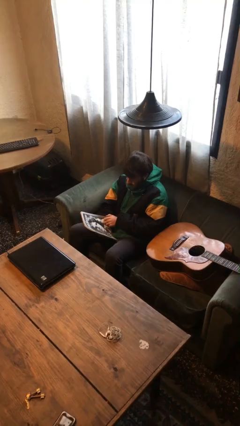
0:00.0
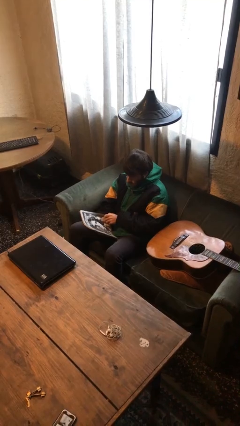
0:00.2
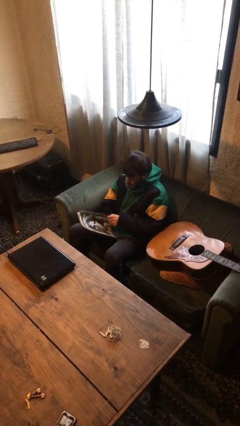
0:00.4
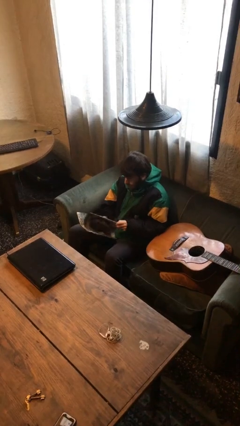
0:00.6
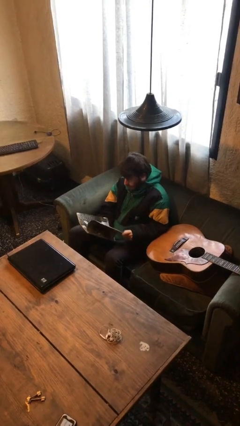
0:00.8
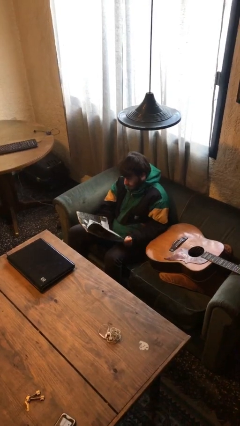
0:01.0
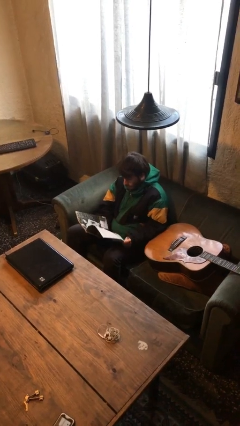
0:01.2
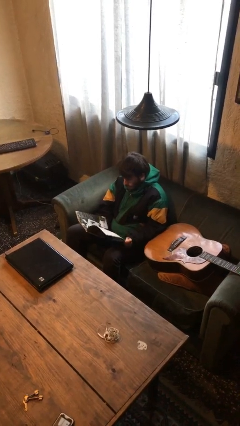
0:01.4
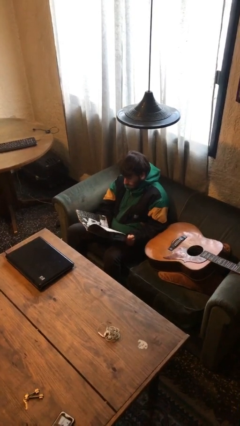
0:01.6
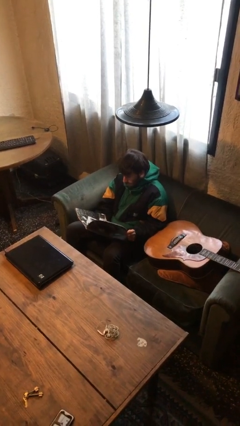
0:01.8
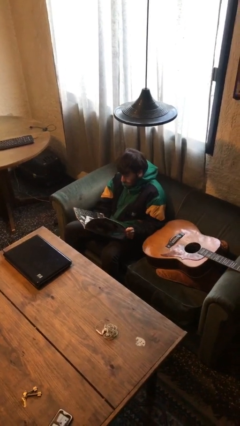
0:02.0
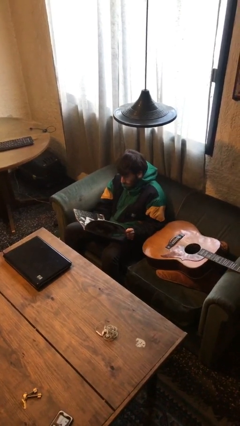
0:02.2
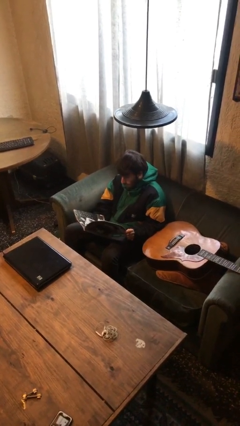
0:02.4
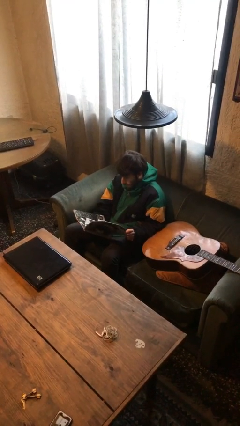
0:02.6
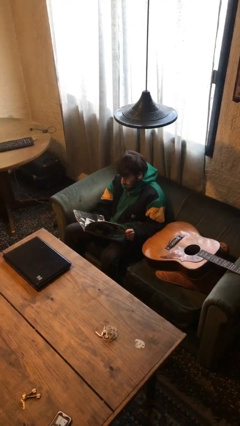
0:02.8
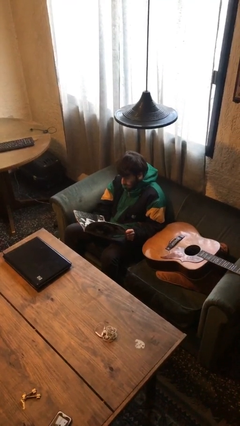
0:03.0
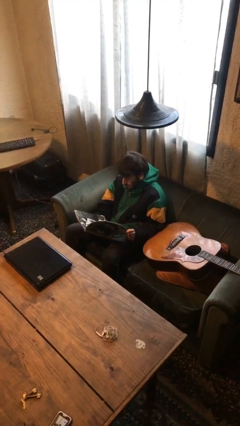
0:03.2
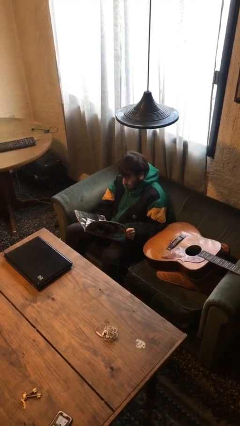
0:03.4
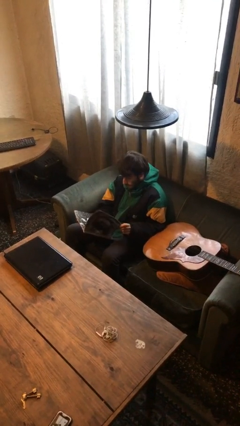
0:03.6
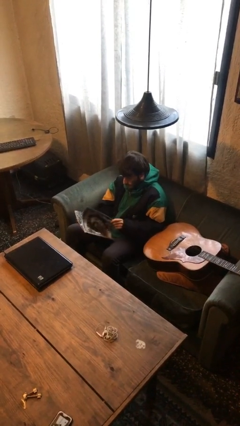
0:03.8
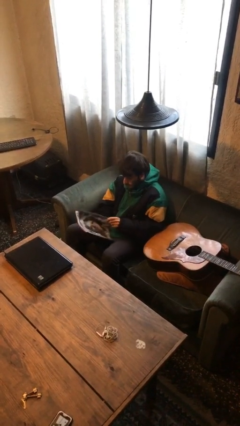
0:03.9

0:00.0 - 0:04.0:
person reads magazine

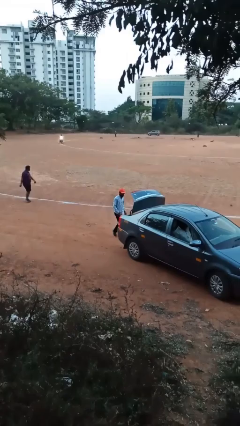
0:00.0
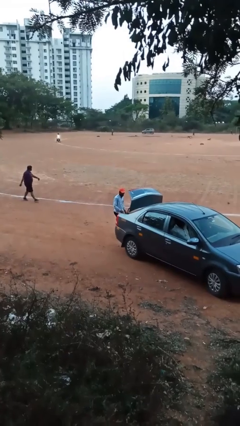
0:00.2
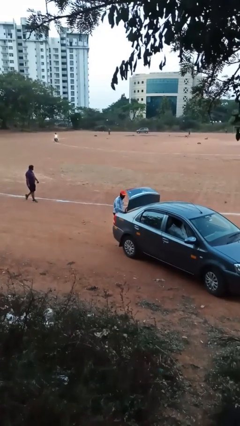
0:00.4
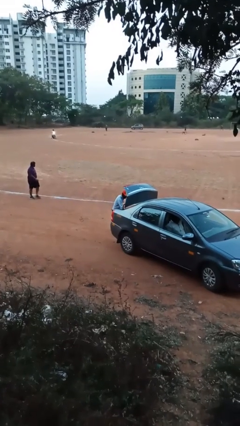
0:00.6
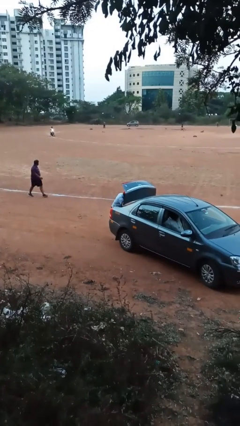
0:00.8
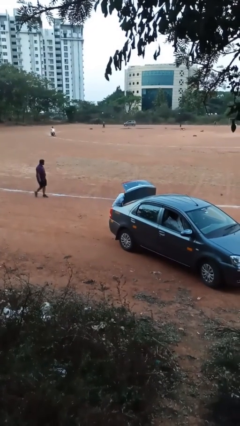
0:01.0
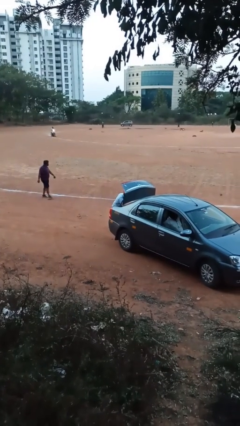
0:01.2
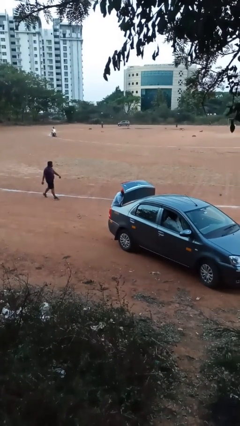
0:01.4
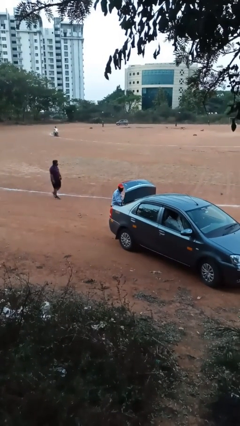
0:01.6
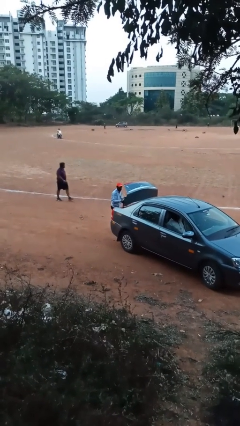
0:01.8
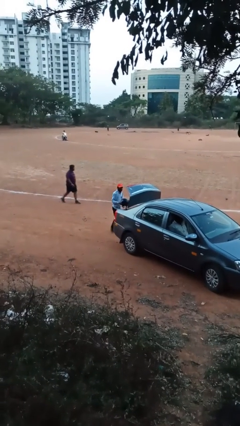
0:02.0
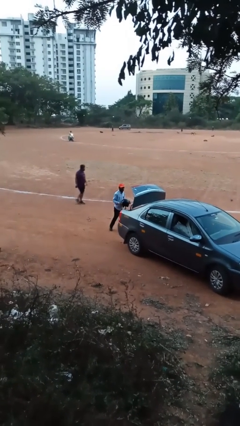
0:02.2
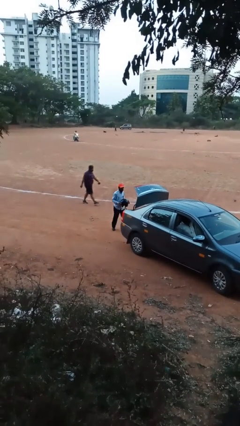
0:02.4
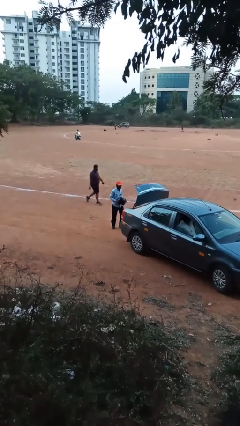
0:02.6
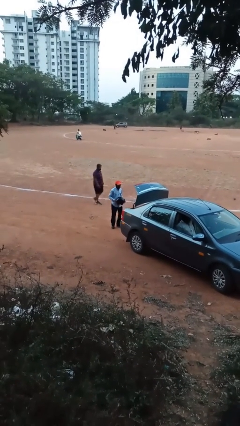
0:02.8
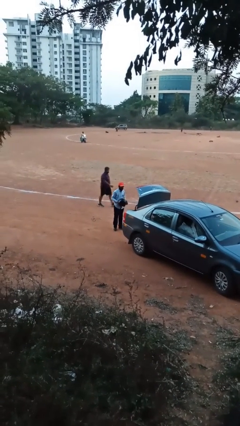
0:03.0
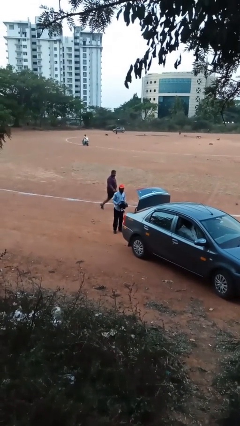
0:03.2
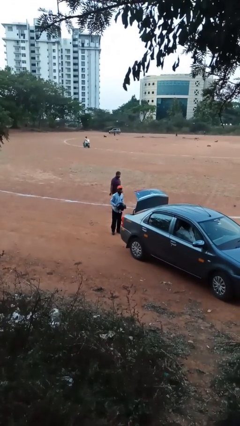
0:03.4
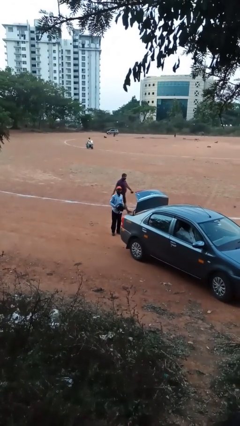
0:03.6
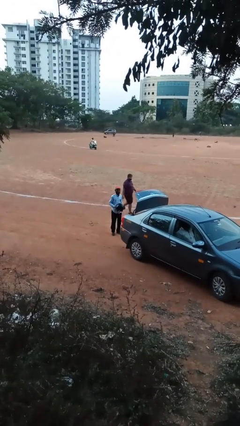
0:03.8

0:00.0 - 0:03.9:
person unloads car

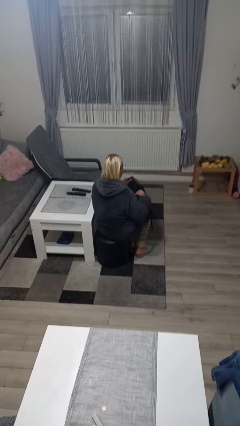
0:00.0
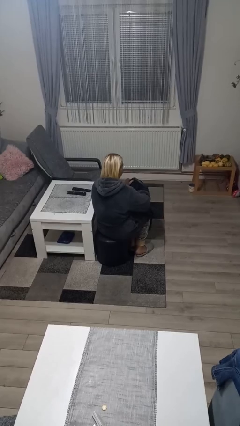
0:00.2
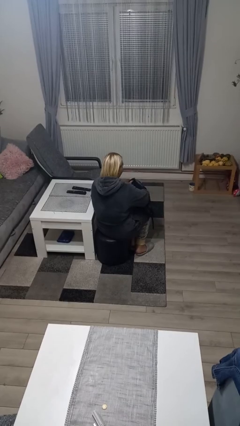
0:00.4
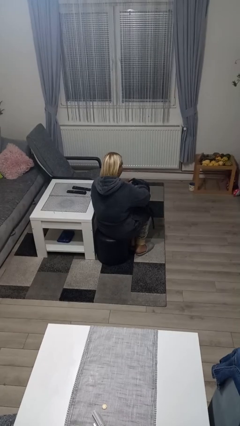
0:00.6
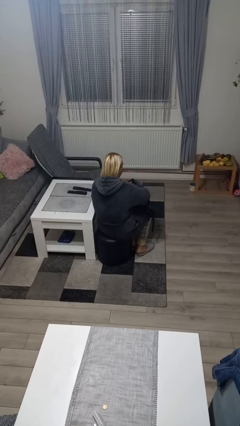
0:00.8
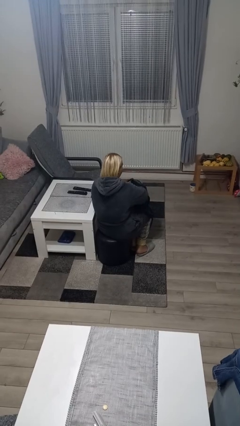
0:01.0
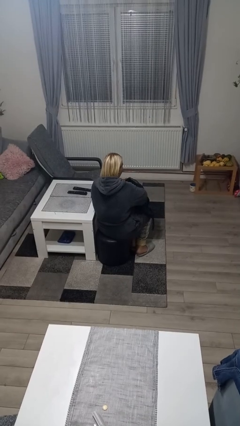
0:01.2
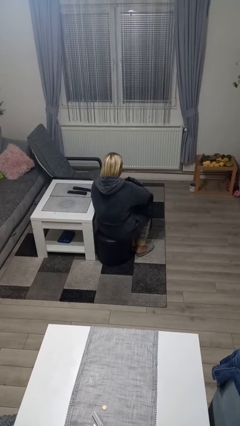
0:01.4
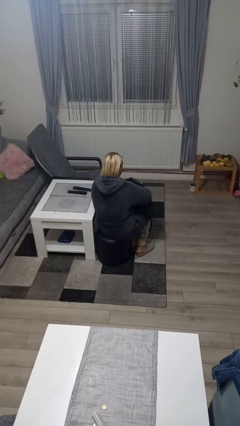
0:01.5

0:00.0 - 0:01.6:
person searches in bag

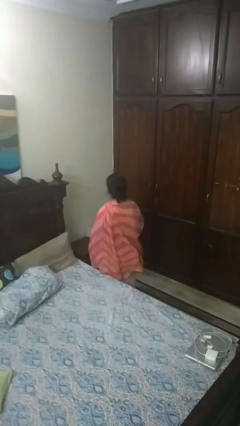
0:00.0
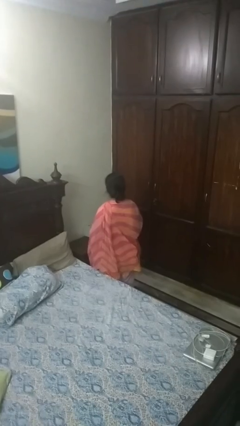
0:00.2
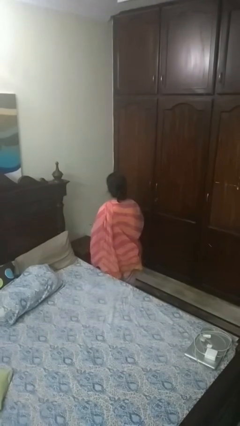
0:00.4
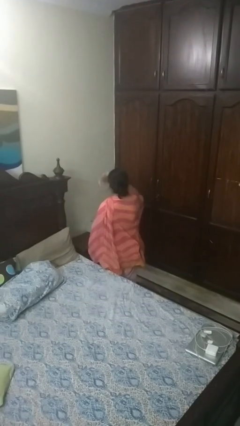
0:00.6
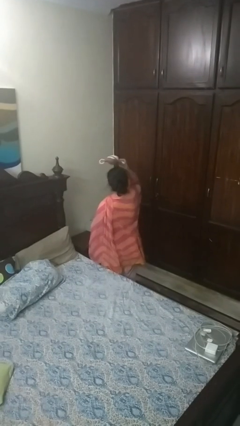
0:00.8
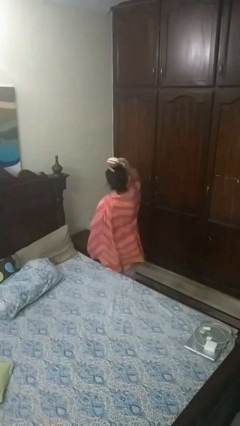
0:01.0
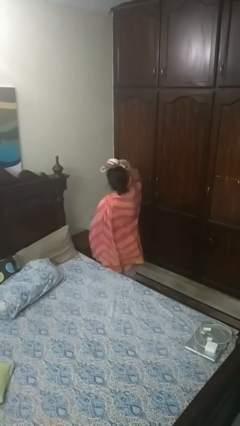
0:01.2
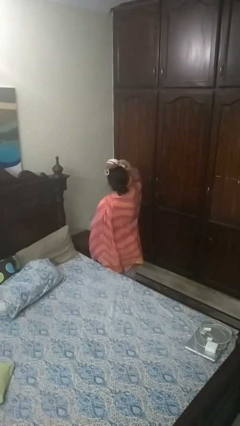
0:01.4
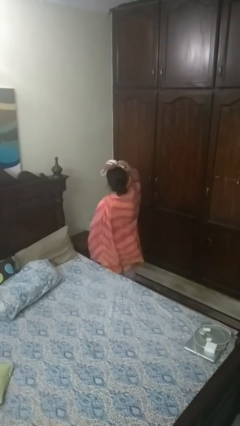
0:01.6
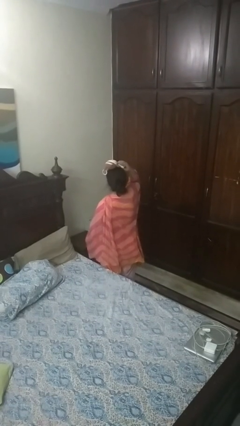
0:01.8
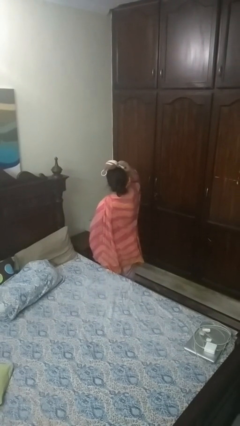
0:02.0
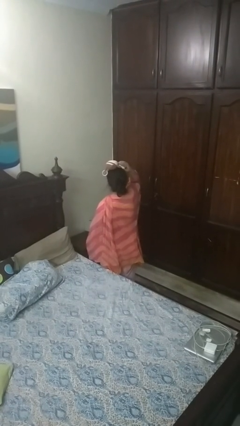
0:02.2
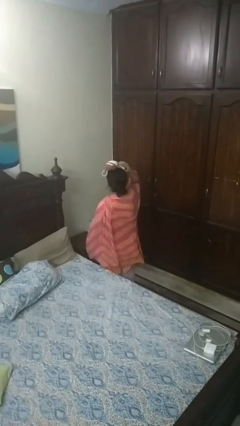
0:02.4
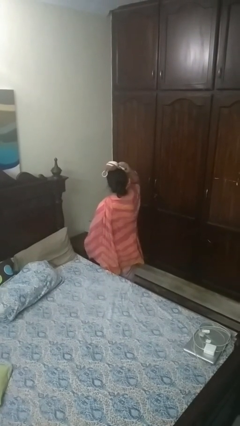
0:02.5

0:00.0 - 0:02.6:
person holds object above head

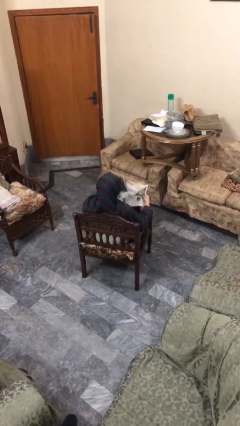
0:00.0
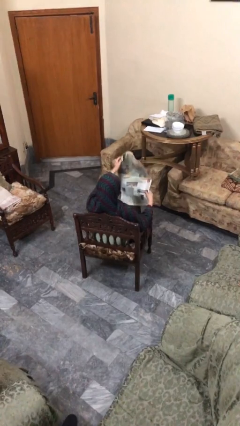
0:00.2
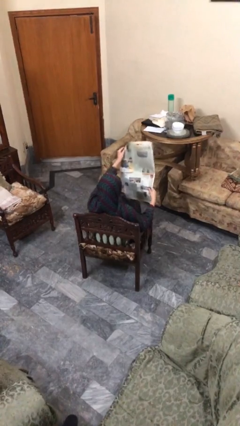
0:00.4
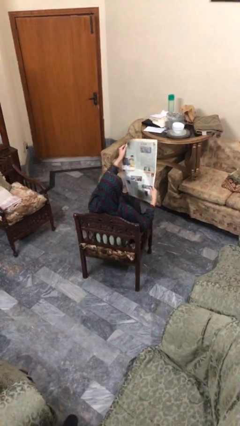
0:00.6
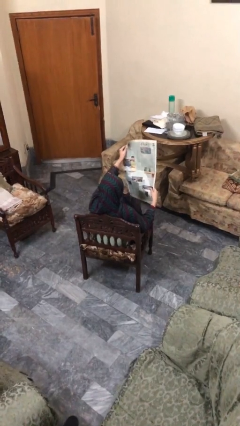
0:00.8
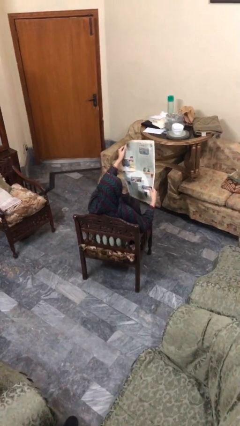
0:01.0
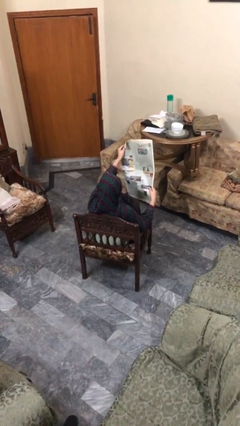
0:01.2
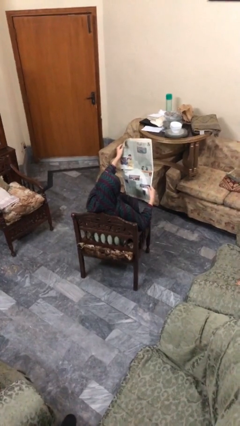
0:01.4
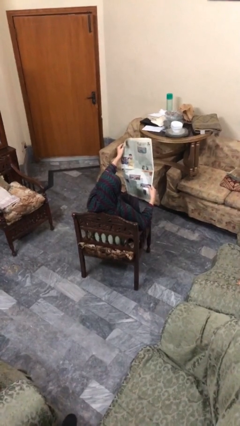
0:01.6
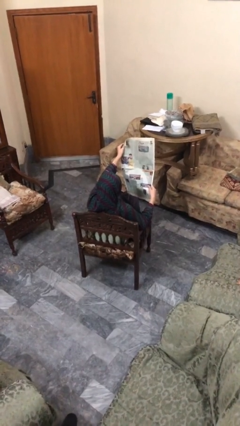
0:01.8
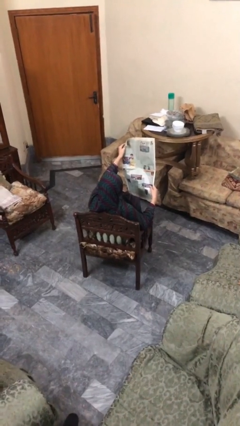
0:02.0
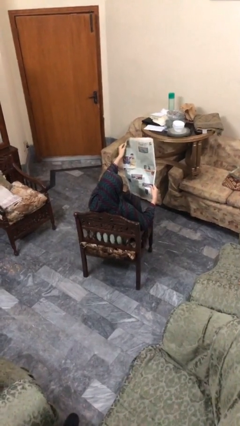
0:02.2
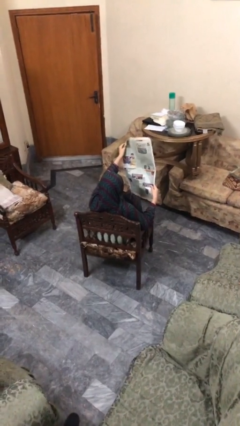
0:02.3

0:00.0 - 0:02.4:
person reads newspaper

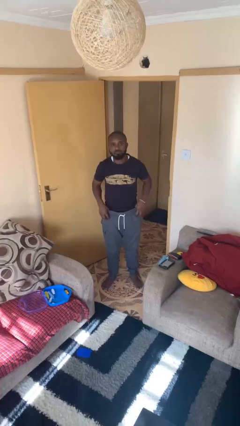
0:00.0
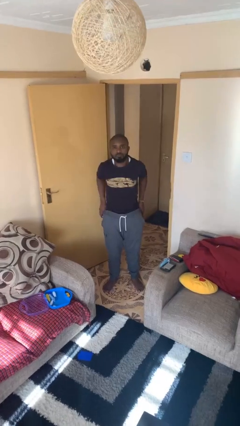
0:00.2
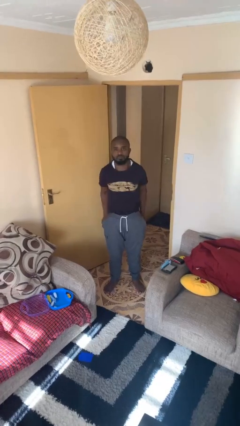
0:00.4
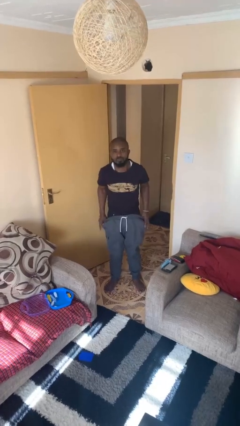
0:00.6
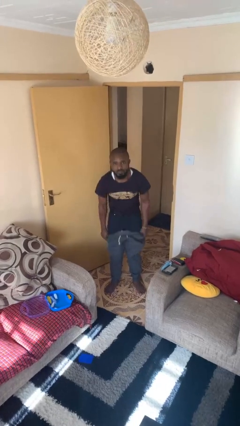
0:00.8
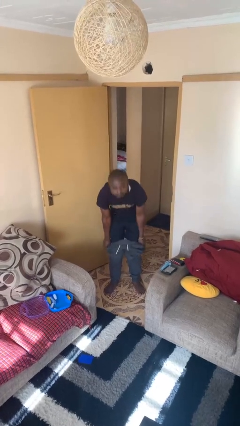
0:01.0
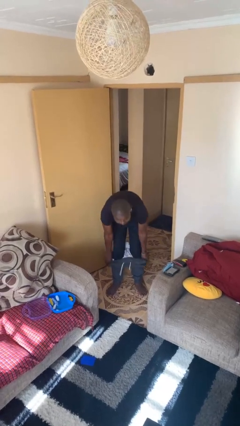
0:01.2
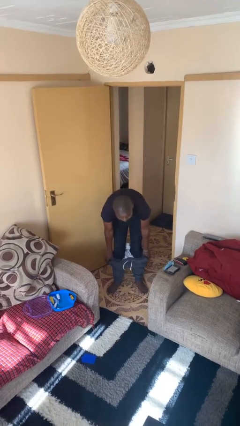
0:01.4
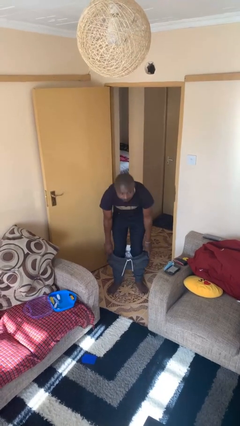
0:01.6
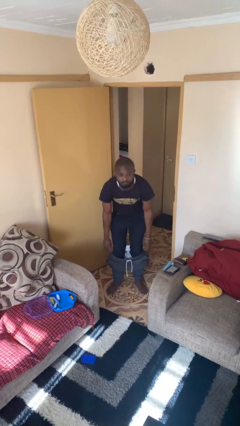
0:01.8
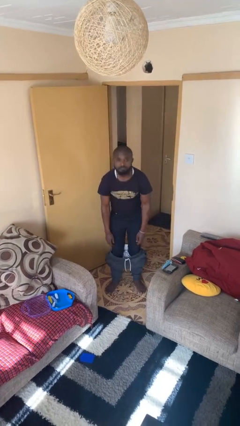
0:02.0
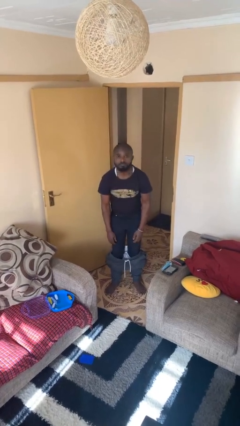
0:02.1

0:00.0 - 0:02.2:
person takes off pants

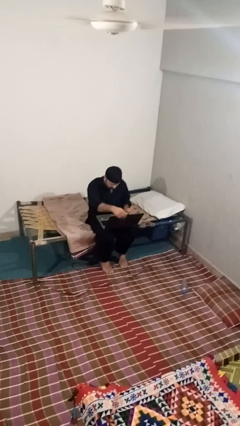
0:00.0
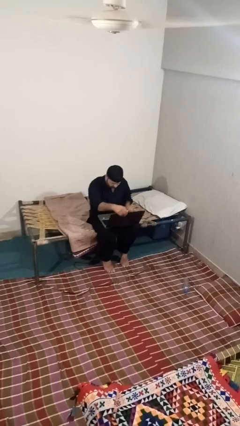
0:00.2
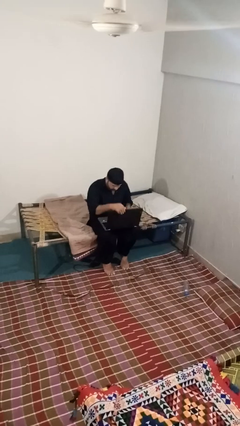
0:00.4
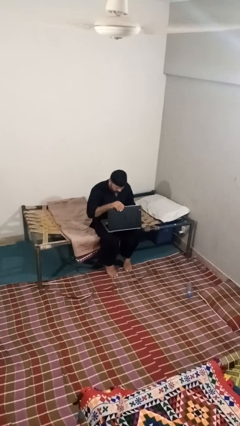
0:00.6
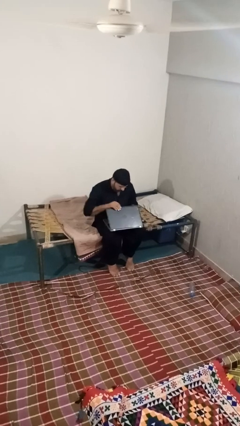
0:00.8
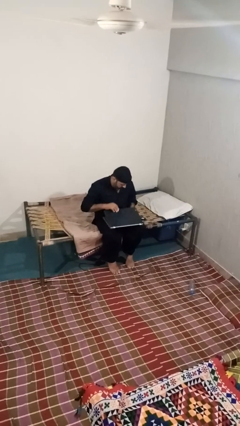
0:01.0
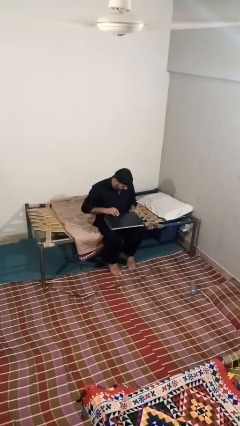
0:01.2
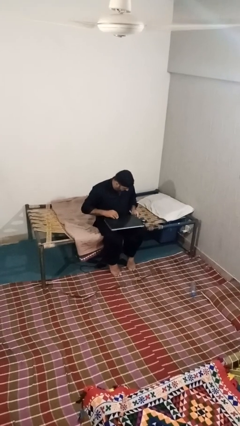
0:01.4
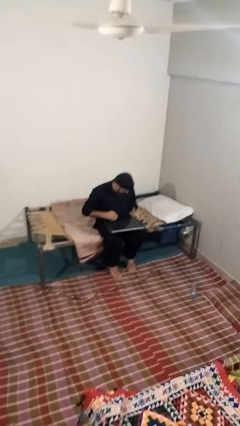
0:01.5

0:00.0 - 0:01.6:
person closes laptop
